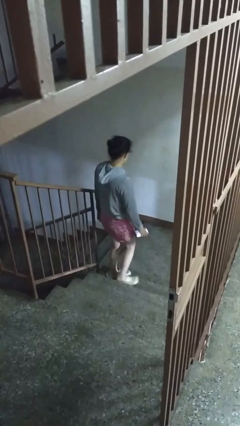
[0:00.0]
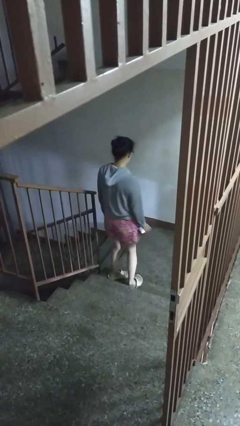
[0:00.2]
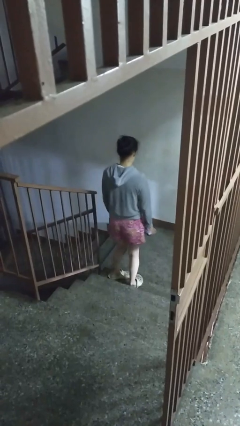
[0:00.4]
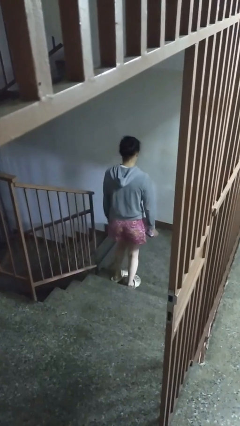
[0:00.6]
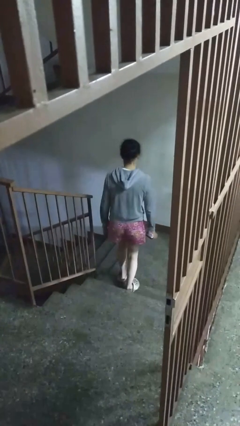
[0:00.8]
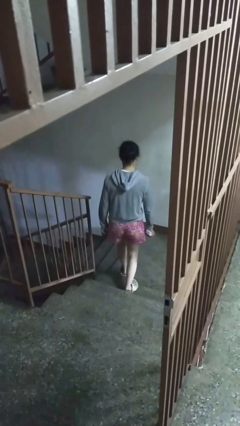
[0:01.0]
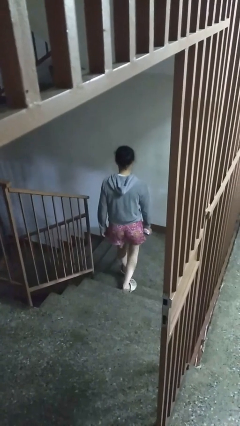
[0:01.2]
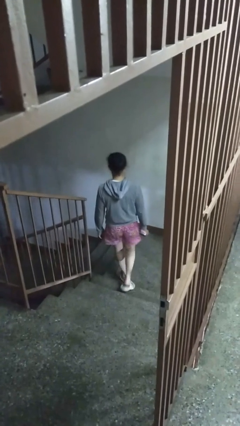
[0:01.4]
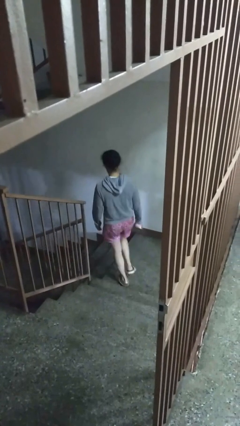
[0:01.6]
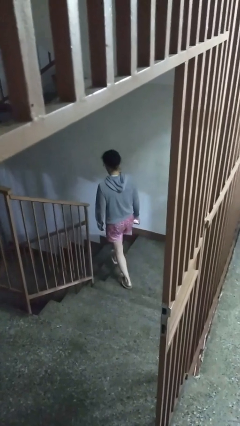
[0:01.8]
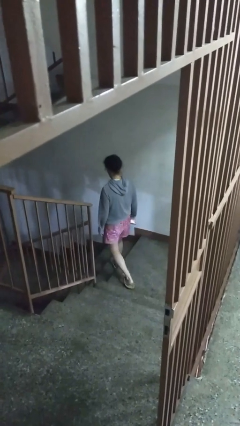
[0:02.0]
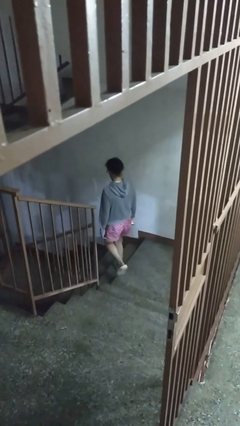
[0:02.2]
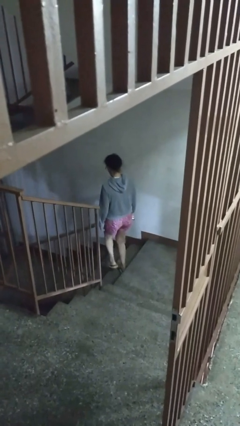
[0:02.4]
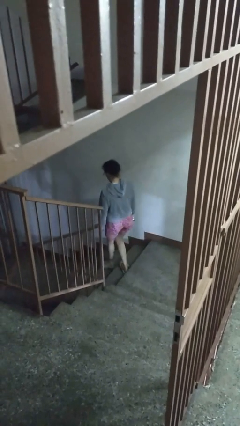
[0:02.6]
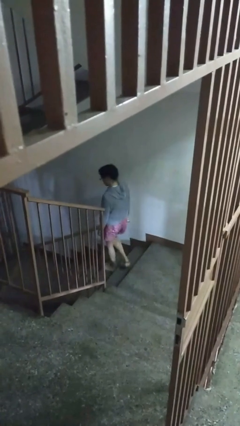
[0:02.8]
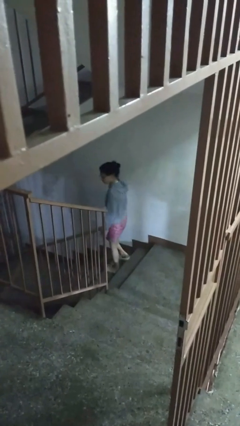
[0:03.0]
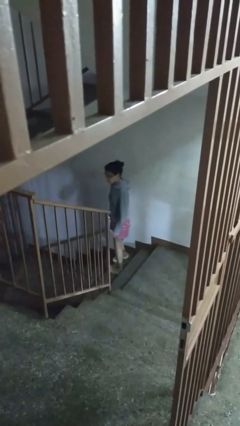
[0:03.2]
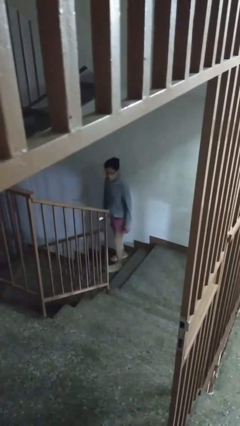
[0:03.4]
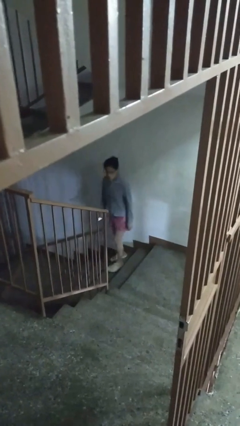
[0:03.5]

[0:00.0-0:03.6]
person climbs down stairs

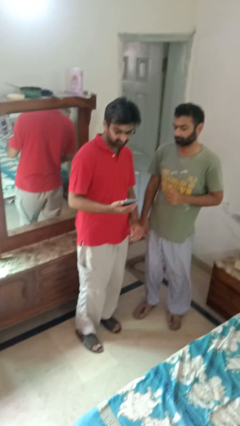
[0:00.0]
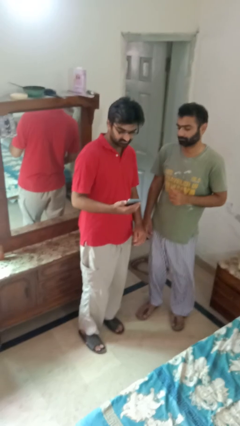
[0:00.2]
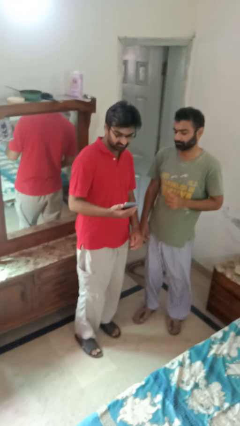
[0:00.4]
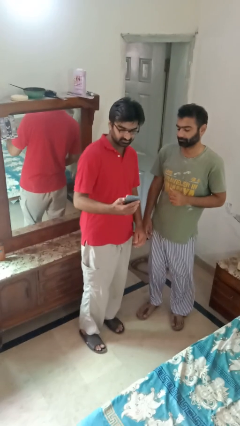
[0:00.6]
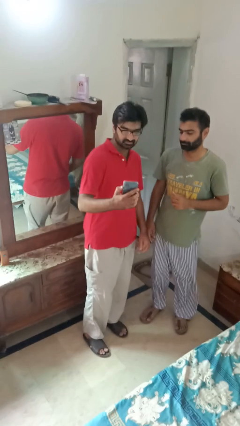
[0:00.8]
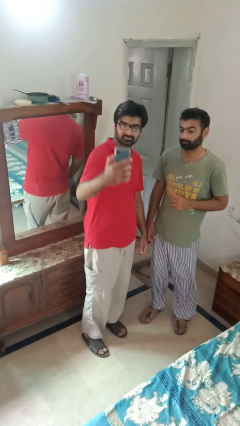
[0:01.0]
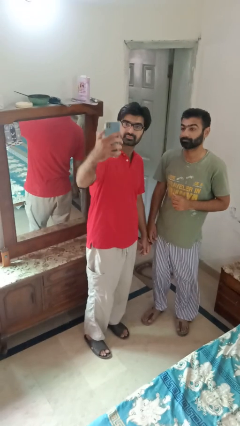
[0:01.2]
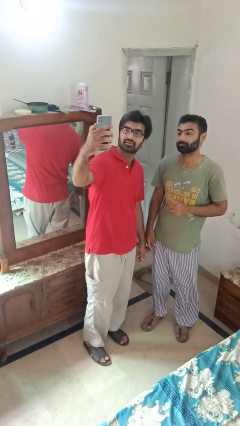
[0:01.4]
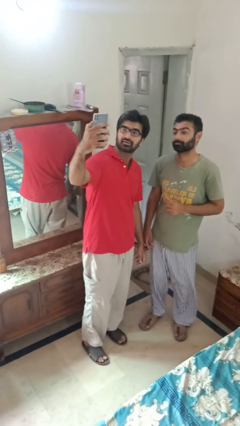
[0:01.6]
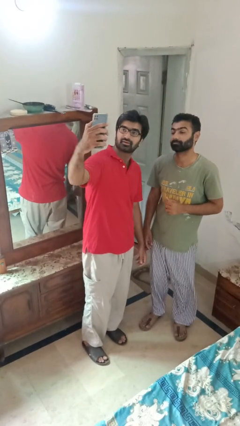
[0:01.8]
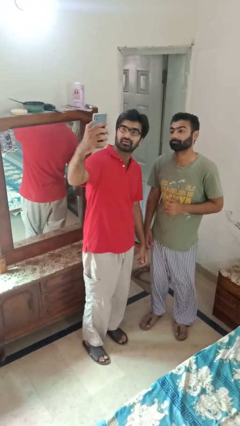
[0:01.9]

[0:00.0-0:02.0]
person takes selfie with person

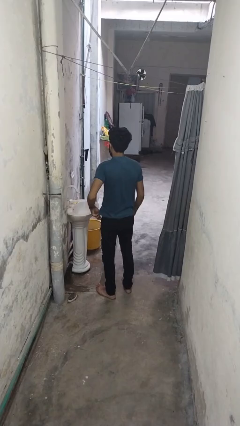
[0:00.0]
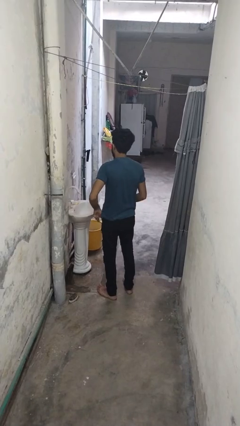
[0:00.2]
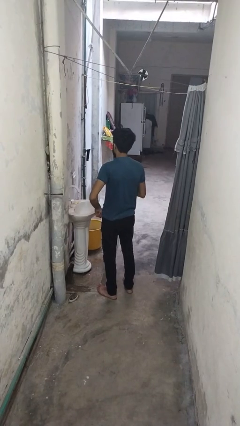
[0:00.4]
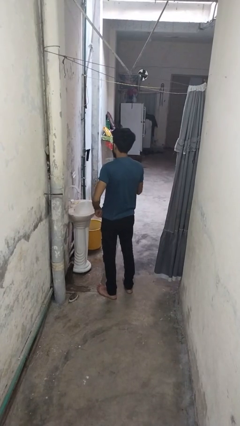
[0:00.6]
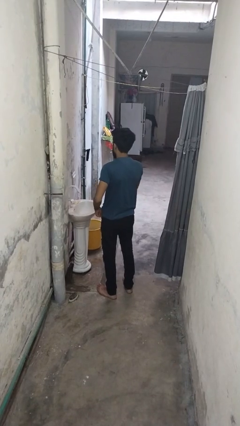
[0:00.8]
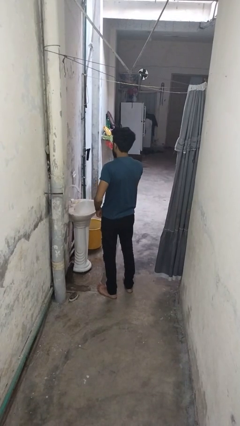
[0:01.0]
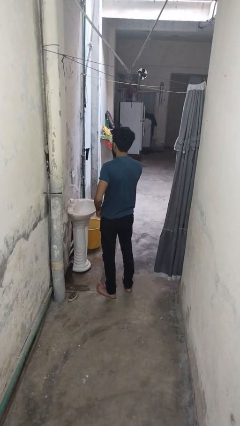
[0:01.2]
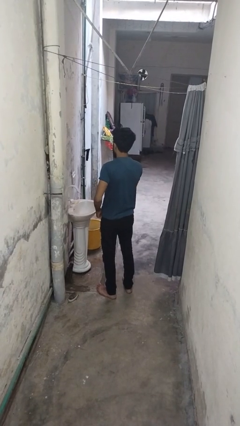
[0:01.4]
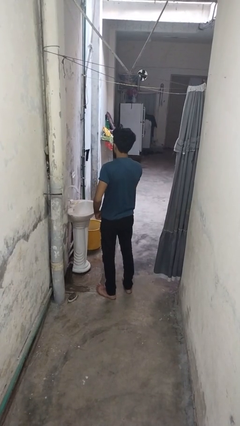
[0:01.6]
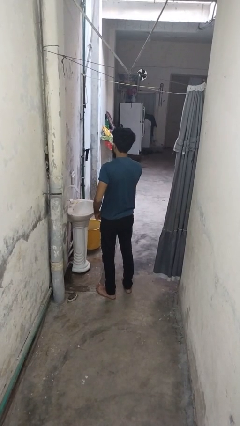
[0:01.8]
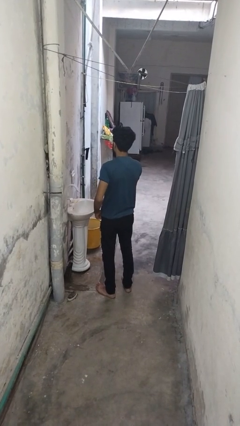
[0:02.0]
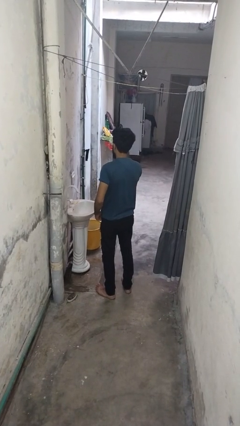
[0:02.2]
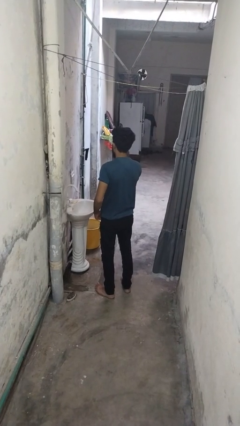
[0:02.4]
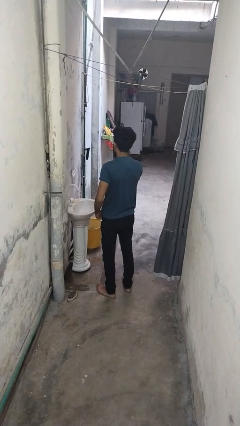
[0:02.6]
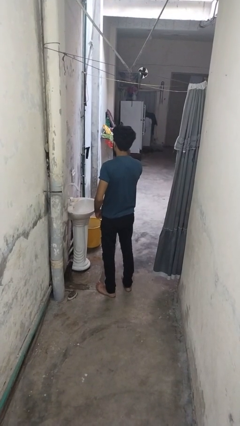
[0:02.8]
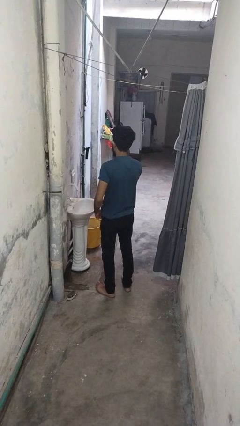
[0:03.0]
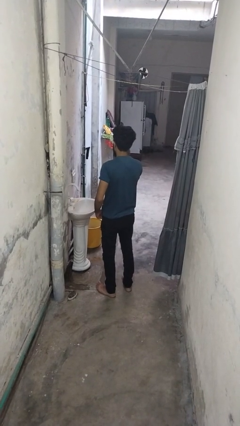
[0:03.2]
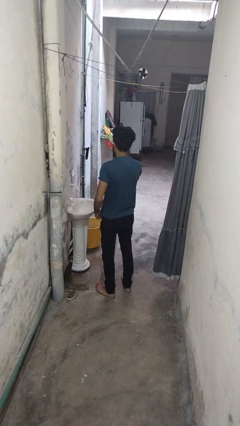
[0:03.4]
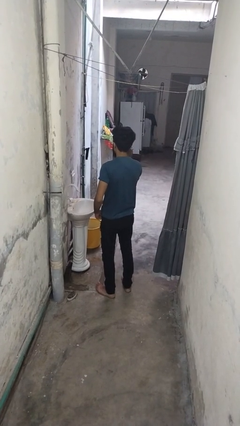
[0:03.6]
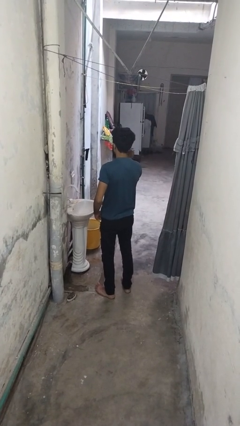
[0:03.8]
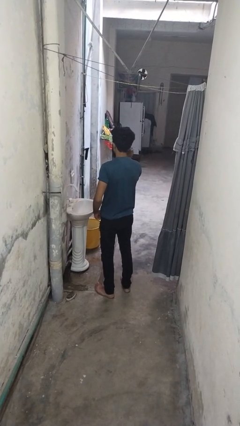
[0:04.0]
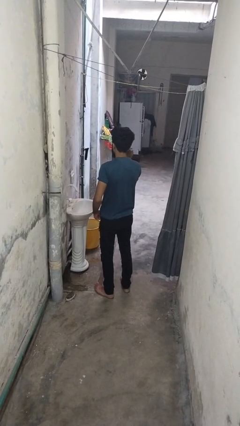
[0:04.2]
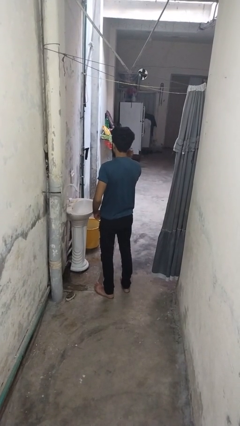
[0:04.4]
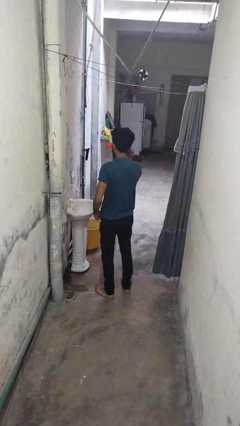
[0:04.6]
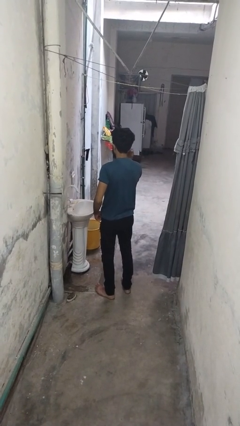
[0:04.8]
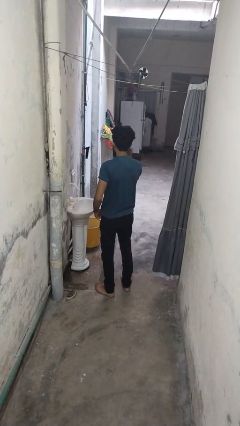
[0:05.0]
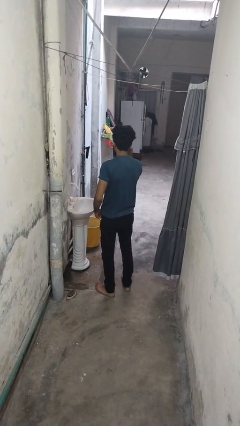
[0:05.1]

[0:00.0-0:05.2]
person brushes teeth

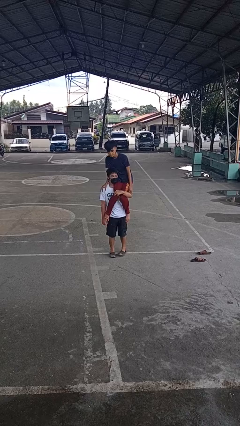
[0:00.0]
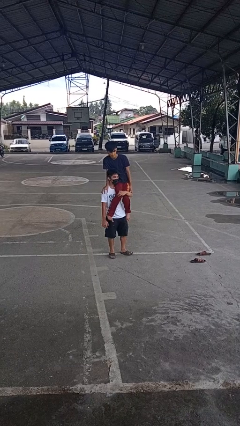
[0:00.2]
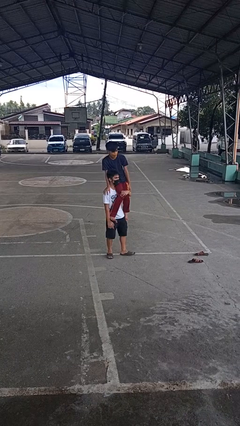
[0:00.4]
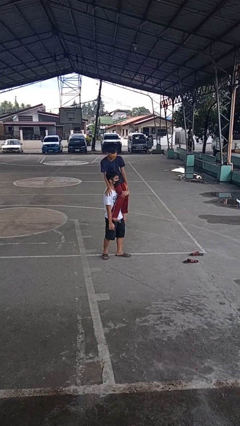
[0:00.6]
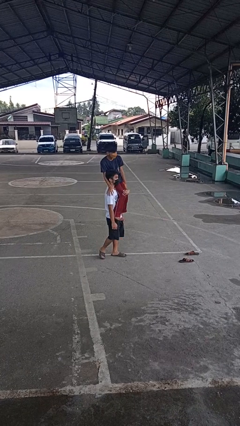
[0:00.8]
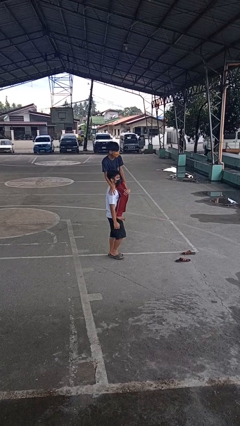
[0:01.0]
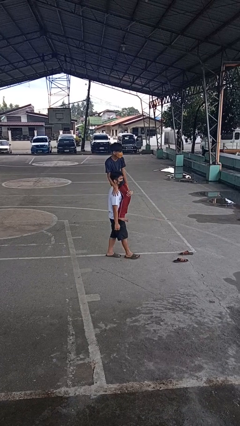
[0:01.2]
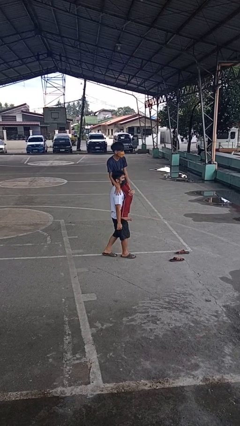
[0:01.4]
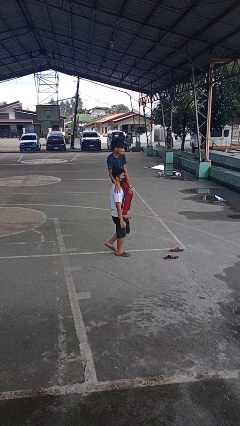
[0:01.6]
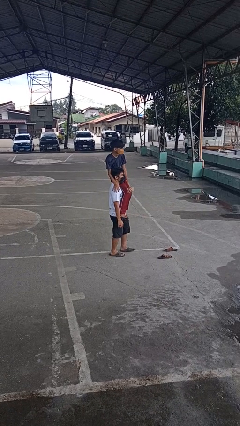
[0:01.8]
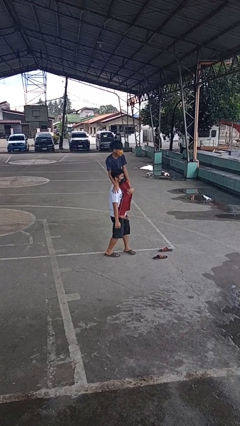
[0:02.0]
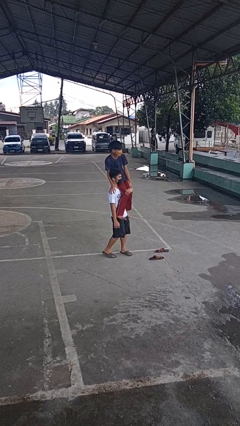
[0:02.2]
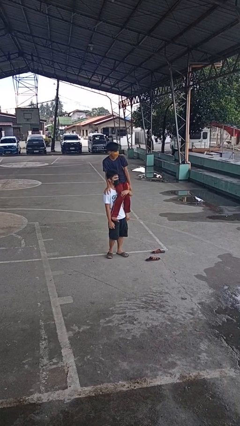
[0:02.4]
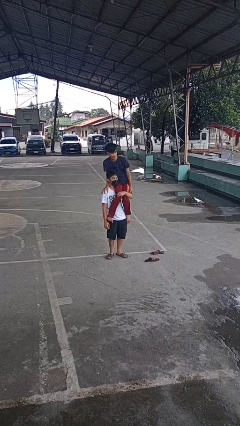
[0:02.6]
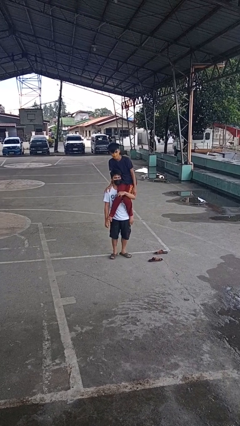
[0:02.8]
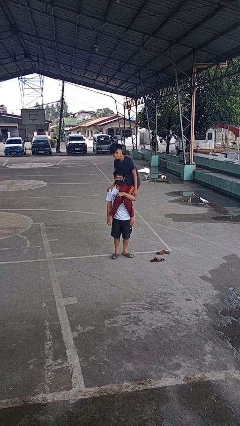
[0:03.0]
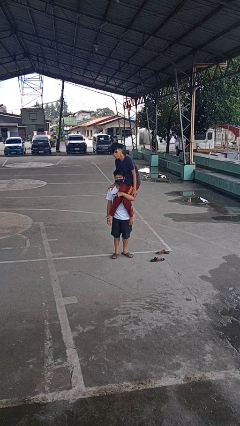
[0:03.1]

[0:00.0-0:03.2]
person carries person on shoulders

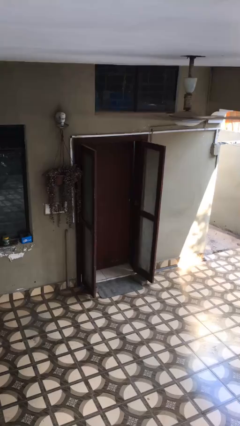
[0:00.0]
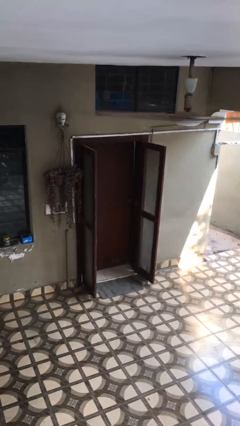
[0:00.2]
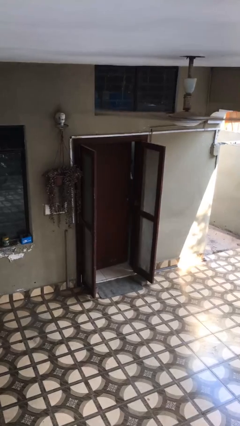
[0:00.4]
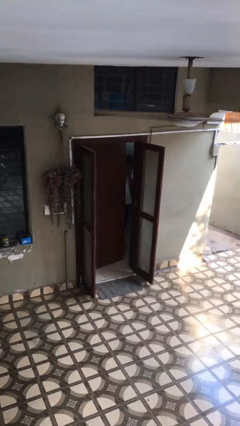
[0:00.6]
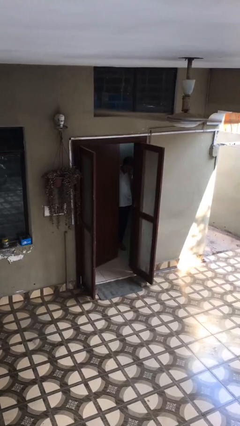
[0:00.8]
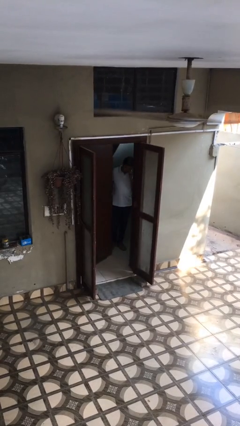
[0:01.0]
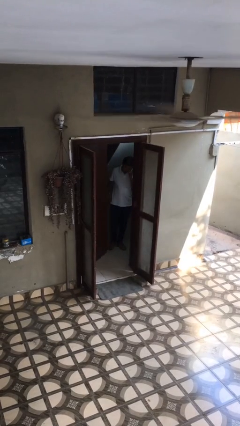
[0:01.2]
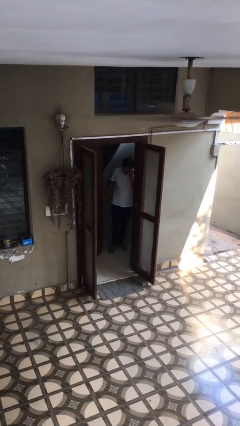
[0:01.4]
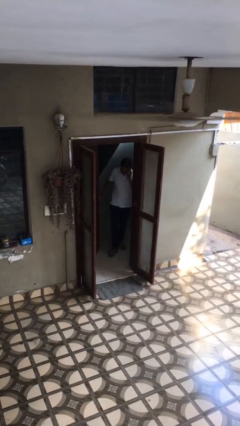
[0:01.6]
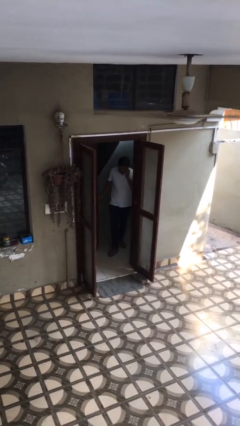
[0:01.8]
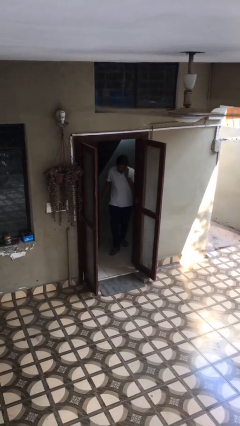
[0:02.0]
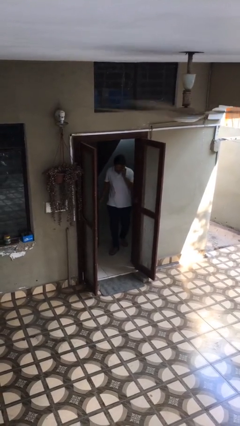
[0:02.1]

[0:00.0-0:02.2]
person opens facility door

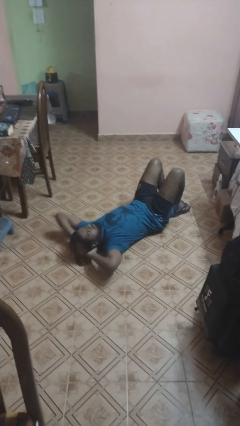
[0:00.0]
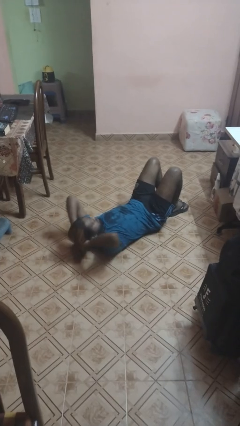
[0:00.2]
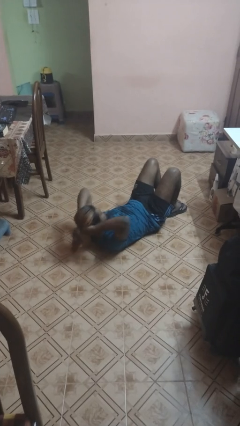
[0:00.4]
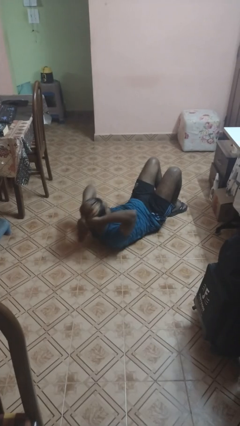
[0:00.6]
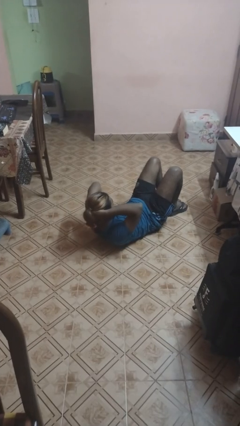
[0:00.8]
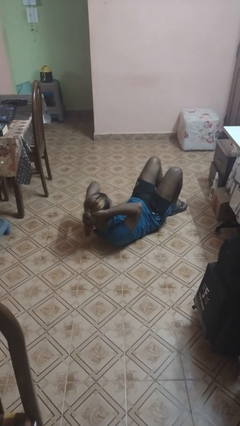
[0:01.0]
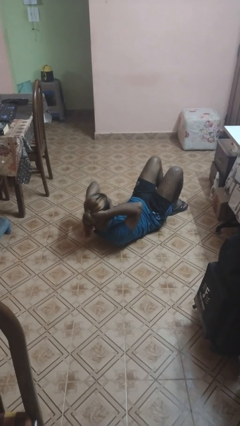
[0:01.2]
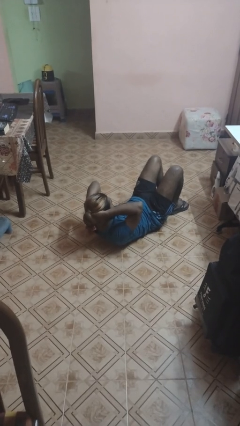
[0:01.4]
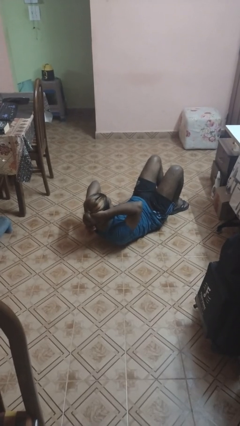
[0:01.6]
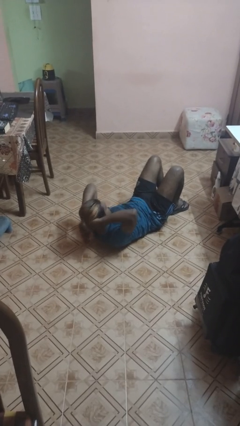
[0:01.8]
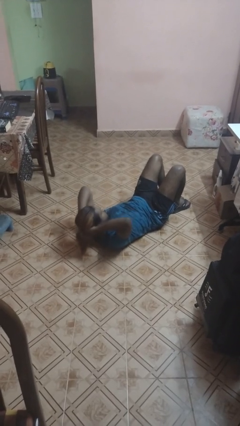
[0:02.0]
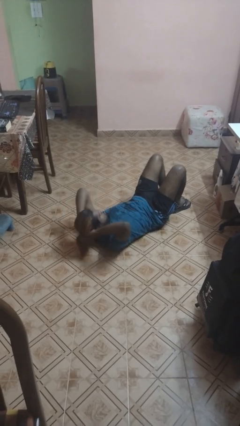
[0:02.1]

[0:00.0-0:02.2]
person exercises with situp
